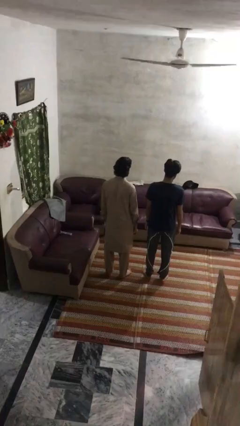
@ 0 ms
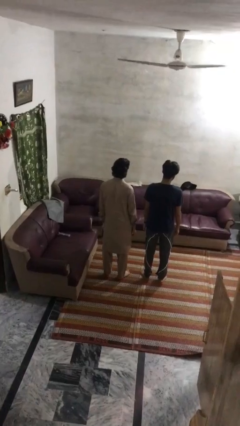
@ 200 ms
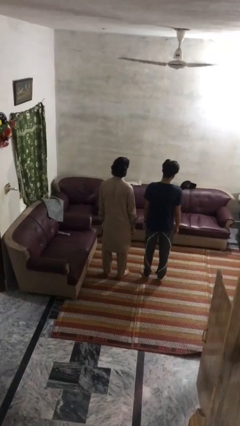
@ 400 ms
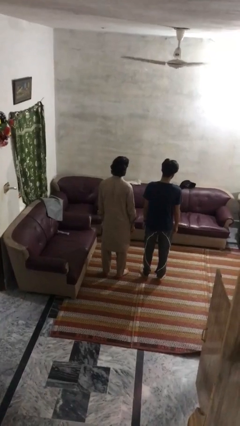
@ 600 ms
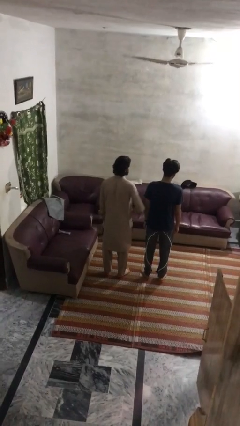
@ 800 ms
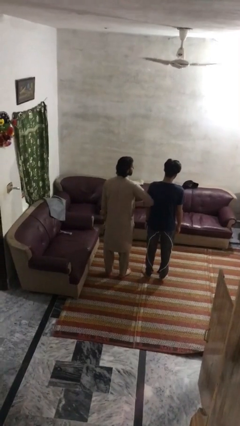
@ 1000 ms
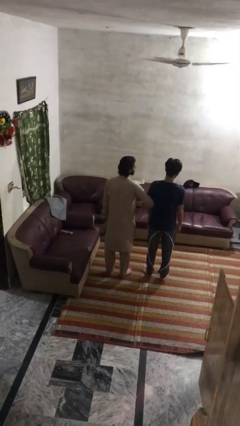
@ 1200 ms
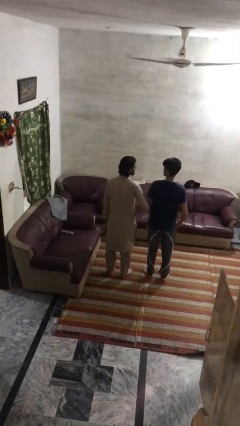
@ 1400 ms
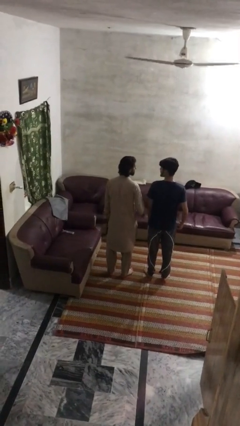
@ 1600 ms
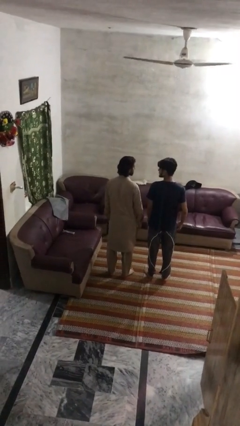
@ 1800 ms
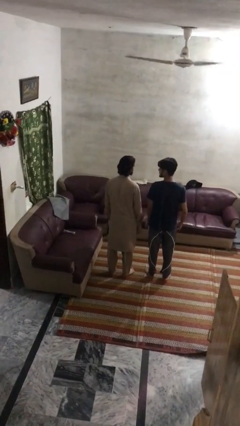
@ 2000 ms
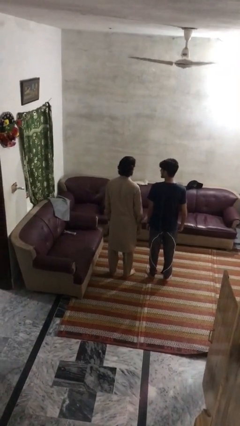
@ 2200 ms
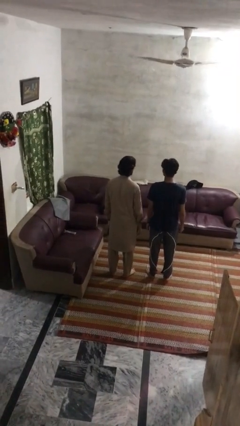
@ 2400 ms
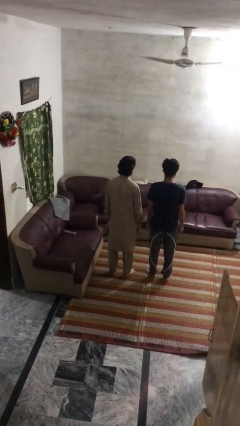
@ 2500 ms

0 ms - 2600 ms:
person nudges person with elbow

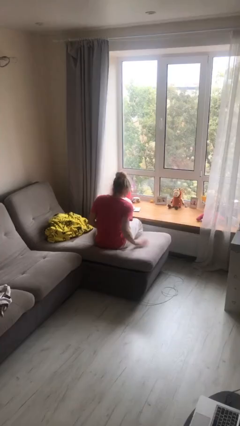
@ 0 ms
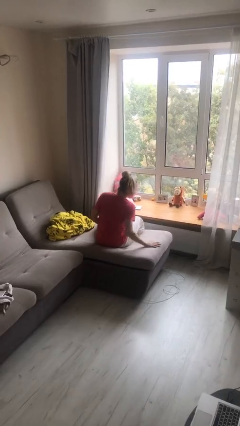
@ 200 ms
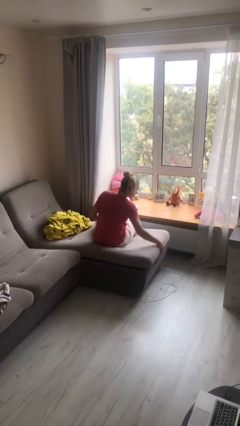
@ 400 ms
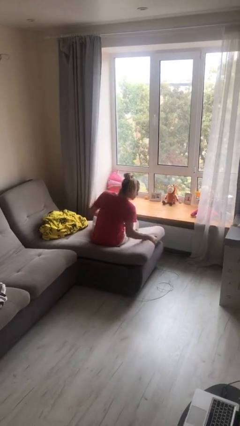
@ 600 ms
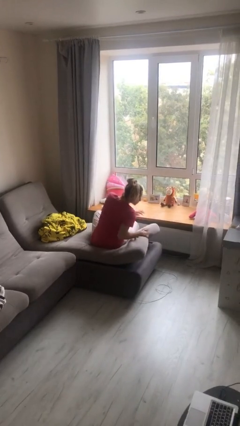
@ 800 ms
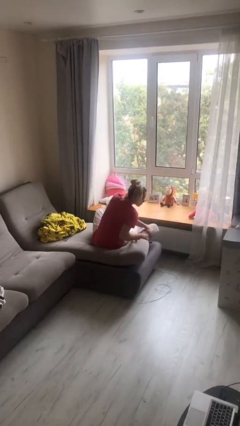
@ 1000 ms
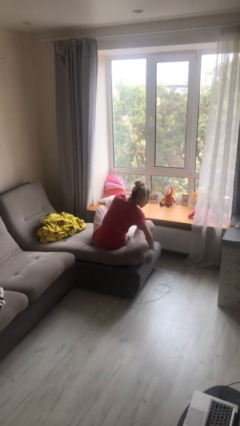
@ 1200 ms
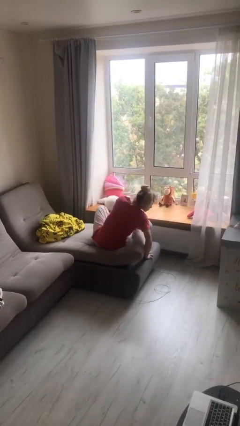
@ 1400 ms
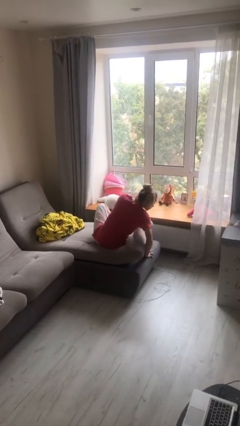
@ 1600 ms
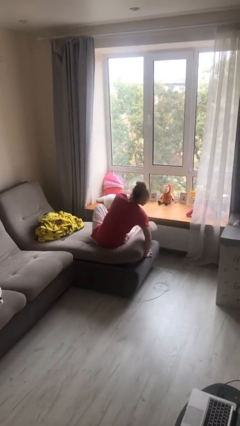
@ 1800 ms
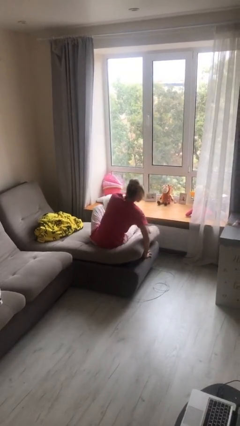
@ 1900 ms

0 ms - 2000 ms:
person searches in couch

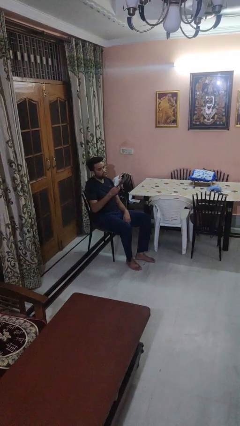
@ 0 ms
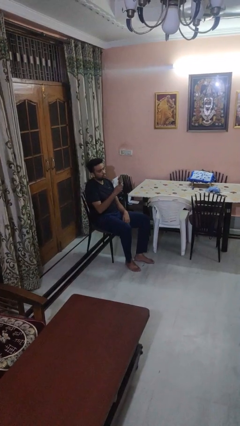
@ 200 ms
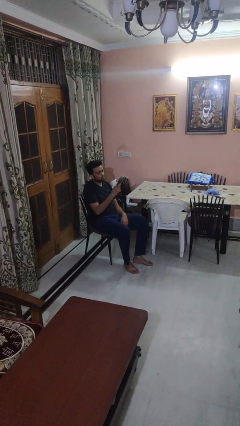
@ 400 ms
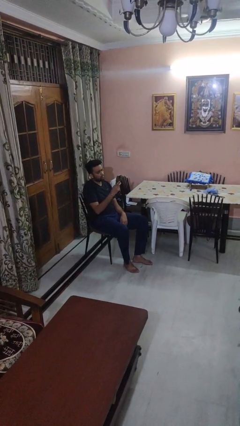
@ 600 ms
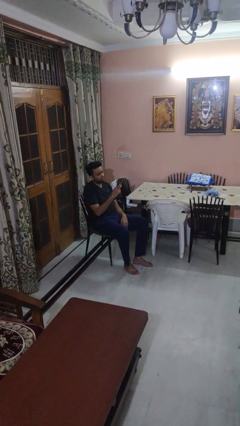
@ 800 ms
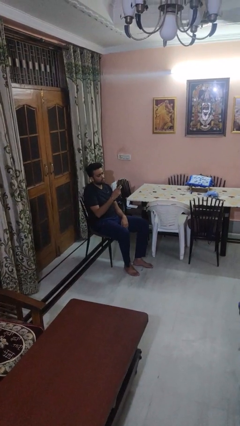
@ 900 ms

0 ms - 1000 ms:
person takes phone from pocket

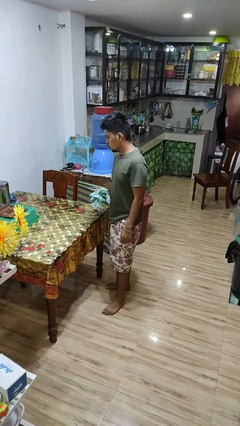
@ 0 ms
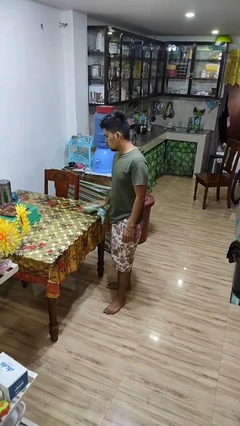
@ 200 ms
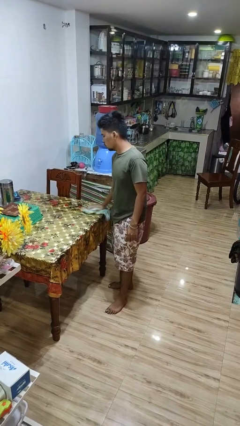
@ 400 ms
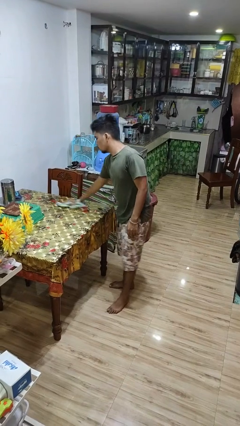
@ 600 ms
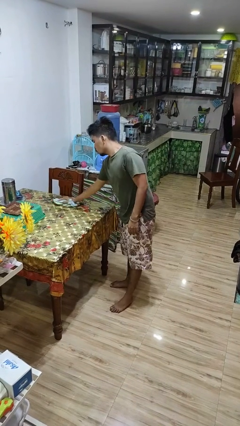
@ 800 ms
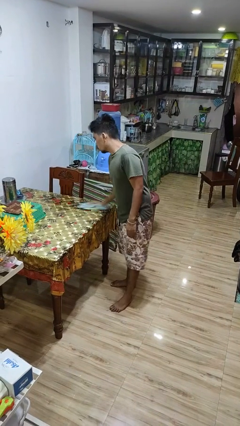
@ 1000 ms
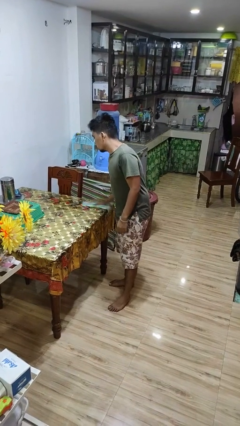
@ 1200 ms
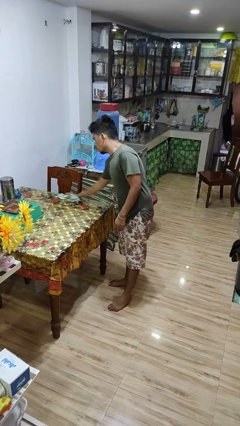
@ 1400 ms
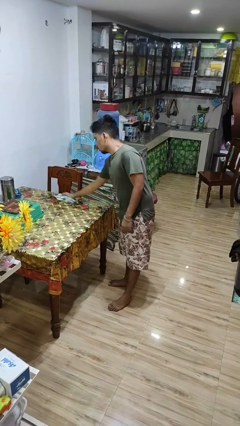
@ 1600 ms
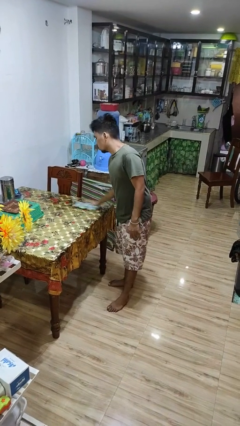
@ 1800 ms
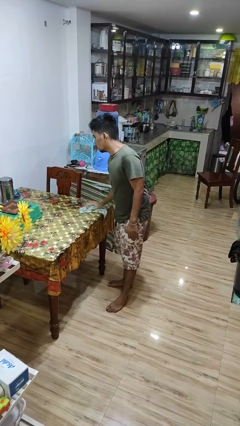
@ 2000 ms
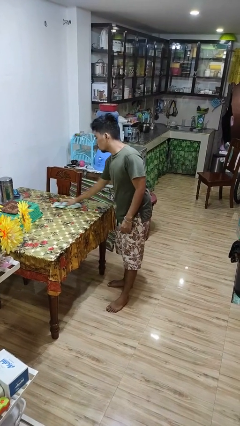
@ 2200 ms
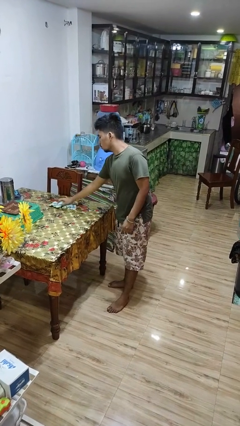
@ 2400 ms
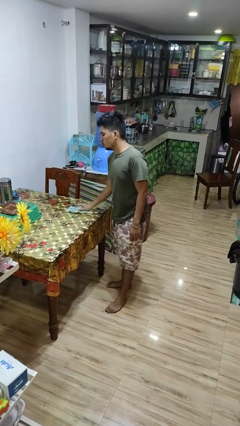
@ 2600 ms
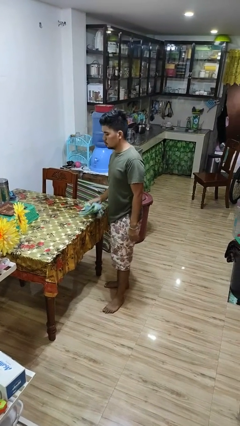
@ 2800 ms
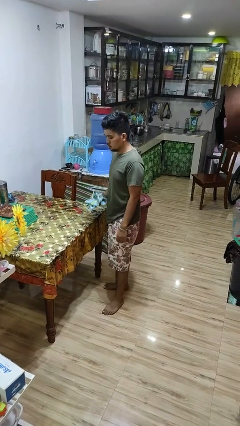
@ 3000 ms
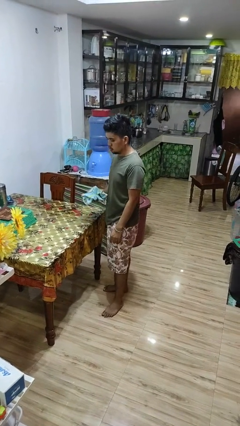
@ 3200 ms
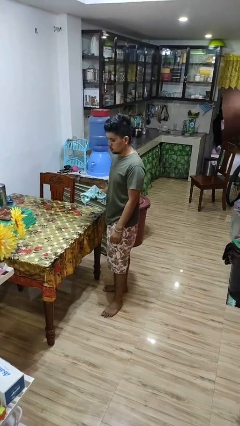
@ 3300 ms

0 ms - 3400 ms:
person cleans table with rag

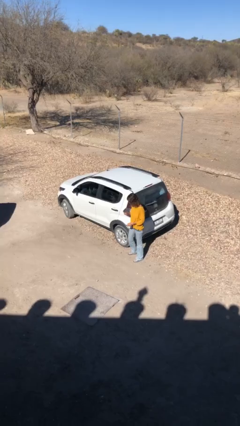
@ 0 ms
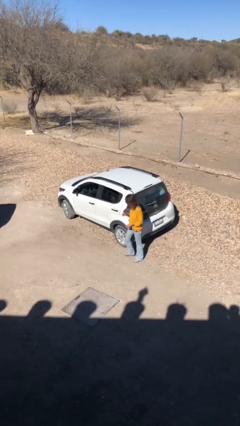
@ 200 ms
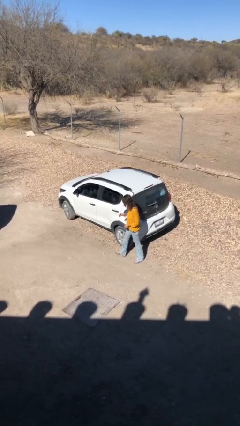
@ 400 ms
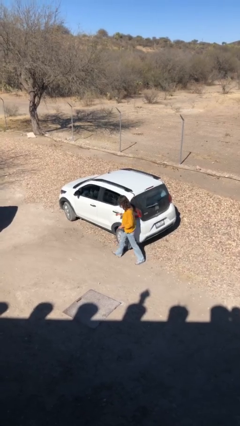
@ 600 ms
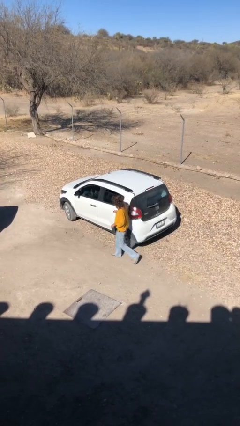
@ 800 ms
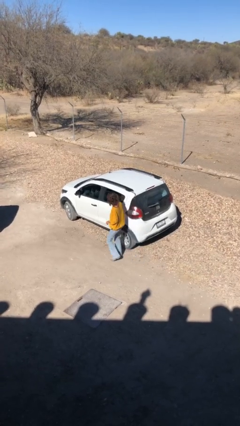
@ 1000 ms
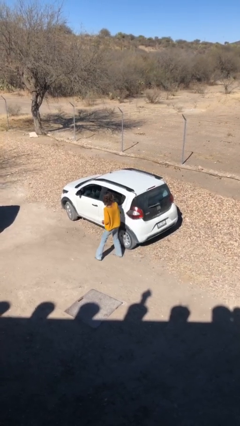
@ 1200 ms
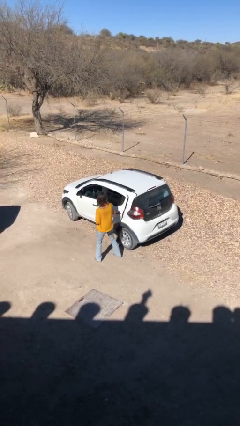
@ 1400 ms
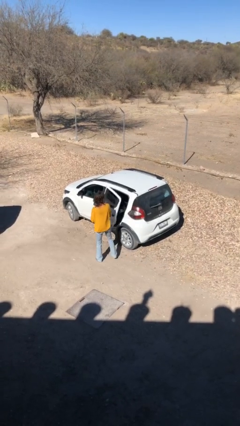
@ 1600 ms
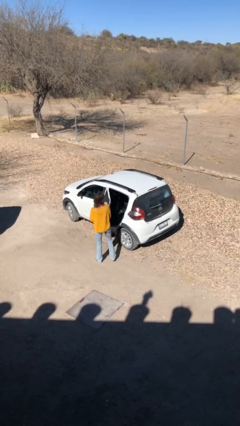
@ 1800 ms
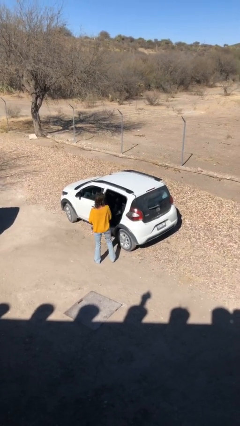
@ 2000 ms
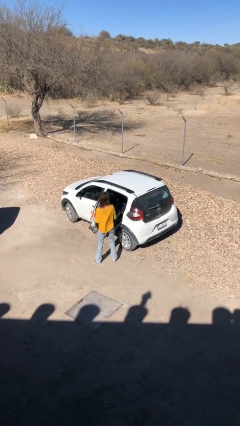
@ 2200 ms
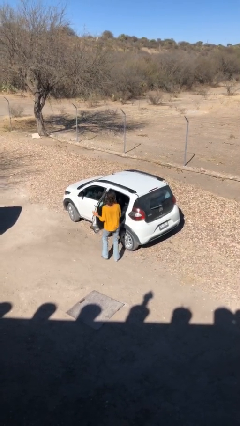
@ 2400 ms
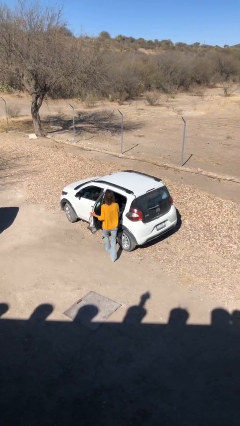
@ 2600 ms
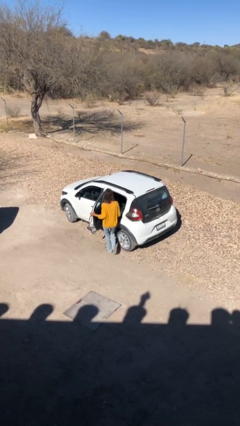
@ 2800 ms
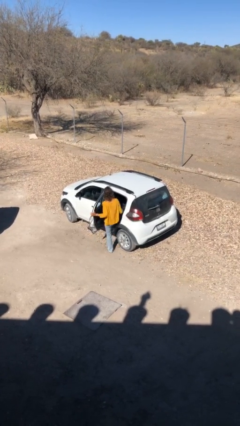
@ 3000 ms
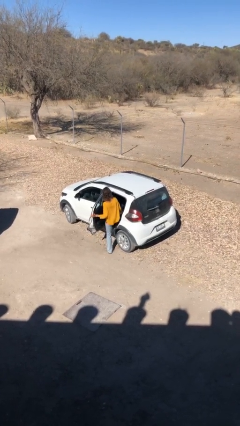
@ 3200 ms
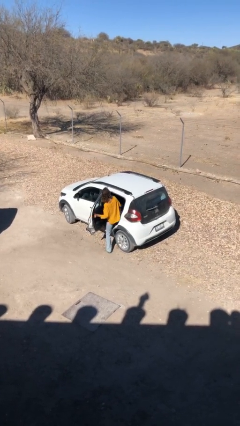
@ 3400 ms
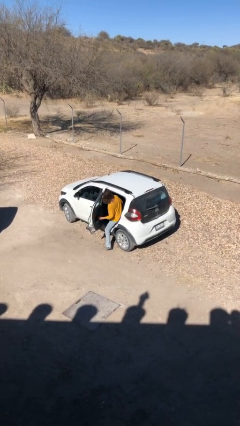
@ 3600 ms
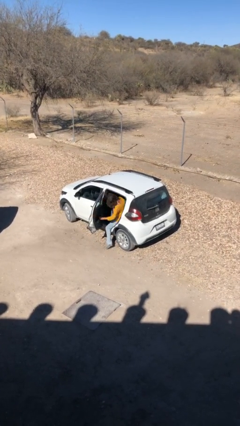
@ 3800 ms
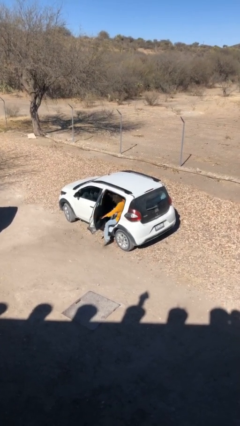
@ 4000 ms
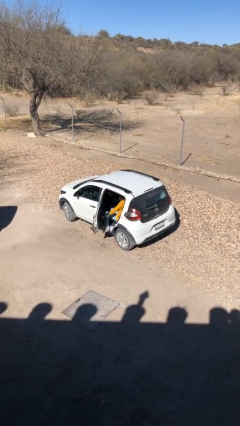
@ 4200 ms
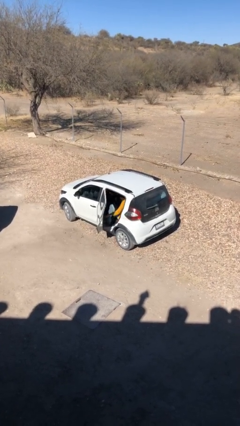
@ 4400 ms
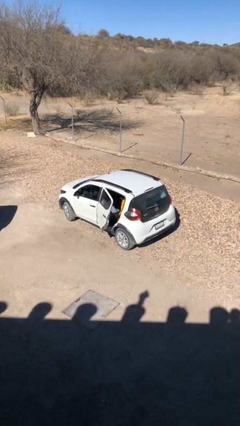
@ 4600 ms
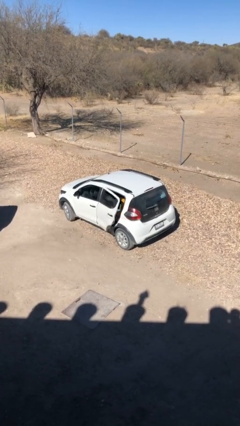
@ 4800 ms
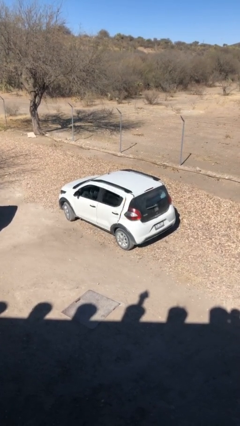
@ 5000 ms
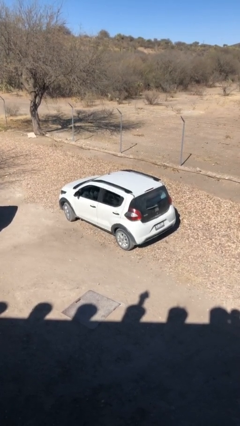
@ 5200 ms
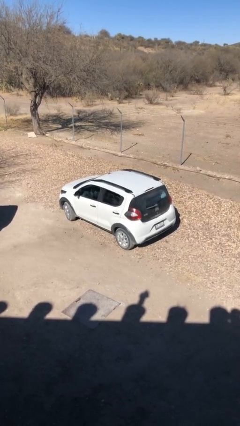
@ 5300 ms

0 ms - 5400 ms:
car picks up person

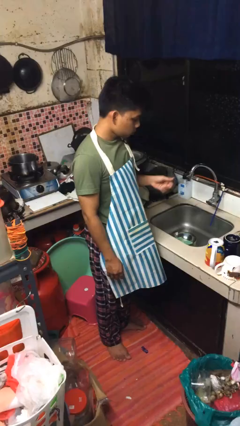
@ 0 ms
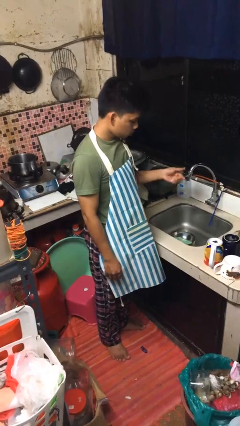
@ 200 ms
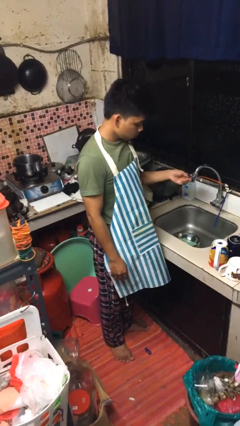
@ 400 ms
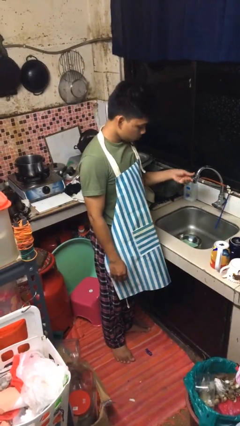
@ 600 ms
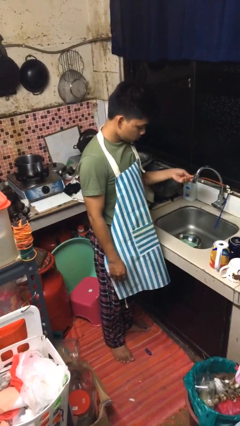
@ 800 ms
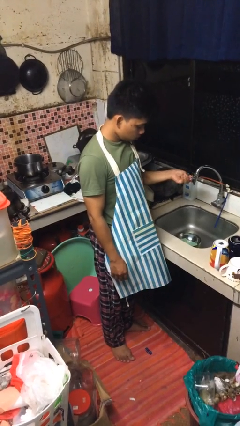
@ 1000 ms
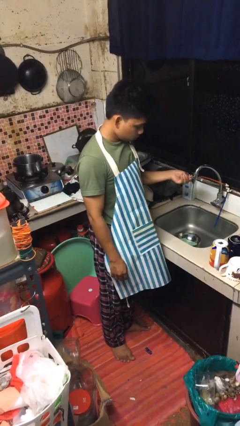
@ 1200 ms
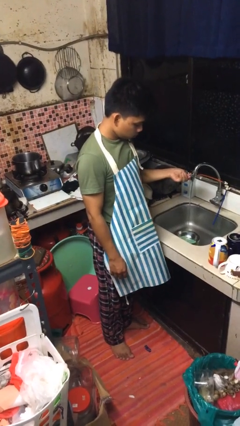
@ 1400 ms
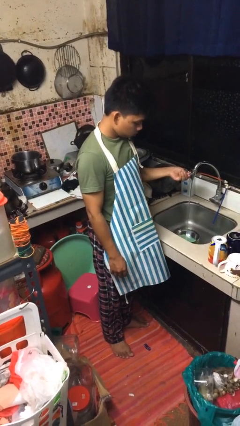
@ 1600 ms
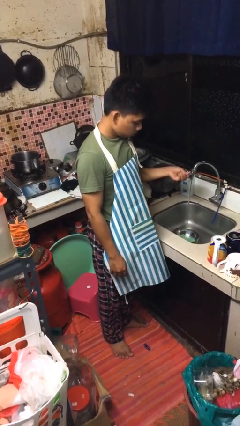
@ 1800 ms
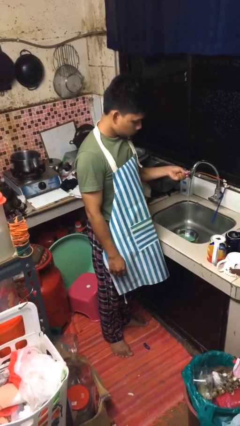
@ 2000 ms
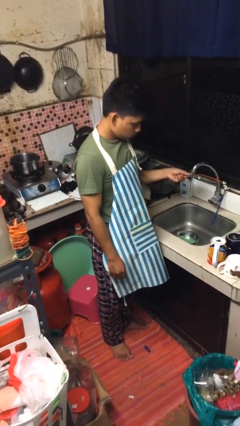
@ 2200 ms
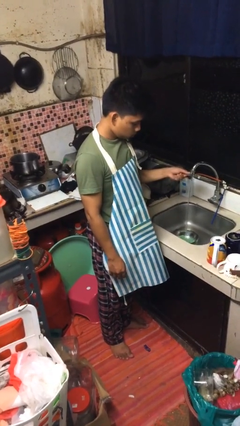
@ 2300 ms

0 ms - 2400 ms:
person turns on faucet

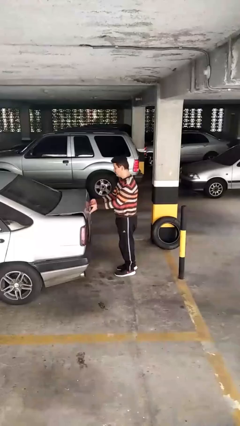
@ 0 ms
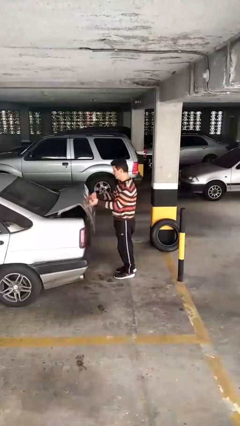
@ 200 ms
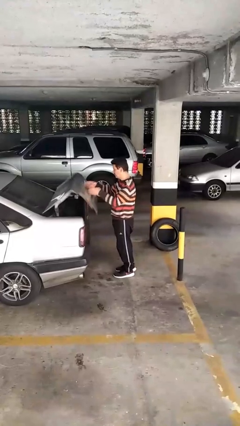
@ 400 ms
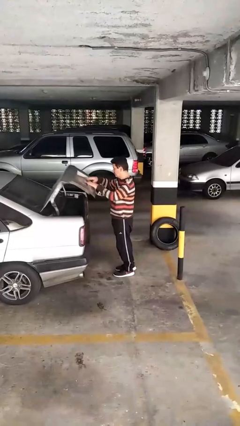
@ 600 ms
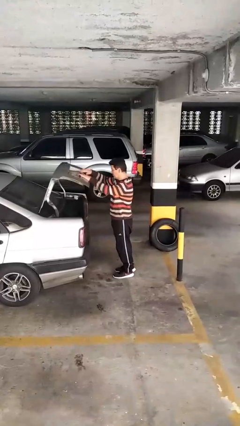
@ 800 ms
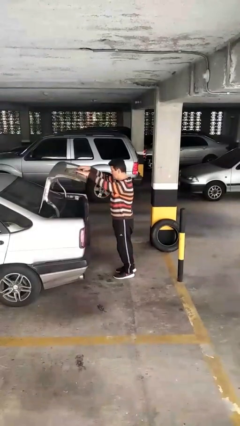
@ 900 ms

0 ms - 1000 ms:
person opens car trunk
